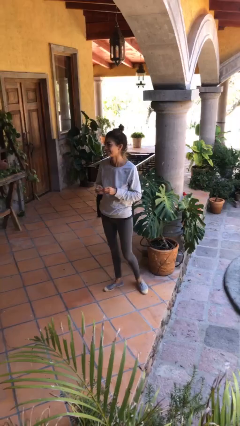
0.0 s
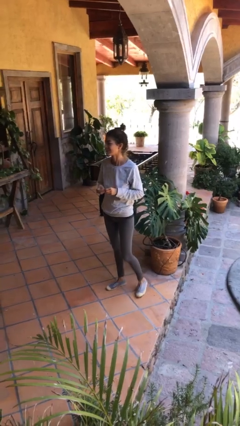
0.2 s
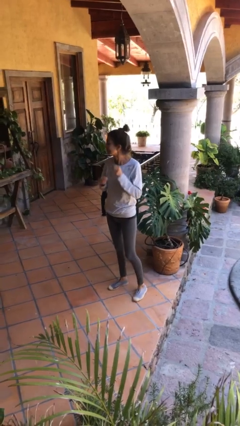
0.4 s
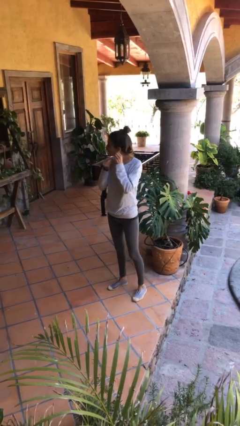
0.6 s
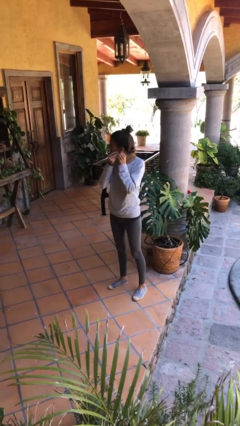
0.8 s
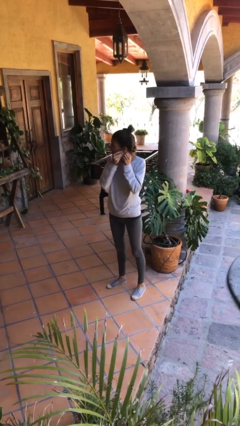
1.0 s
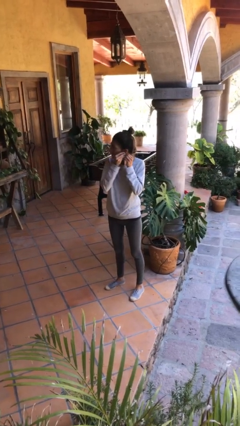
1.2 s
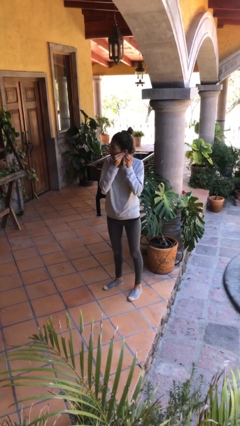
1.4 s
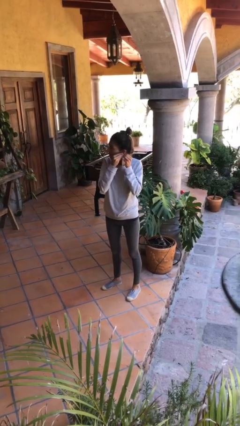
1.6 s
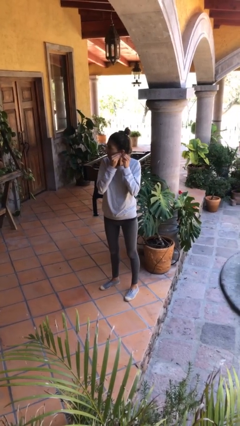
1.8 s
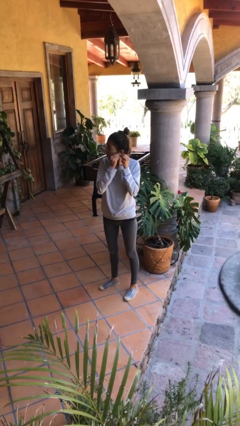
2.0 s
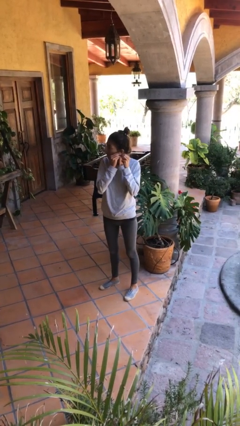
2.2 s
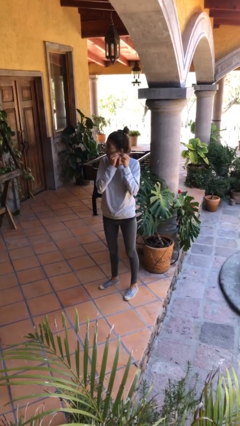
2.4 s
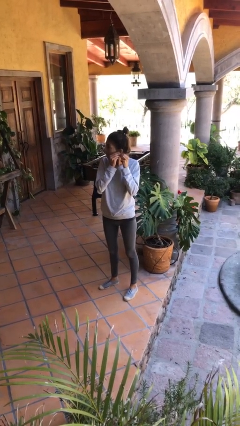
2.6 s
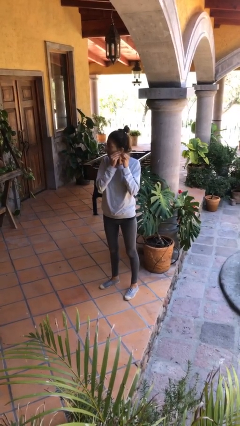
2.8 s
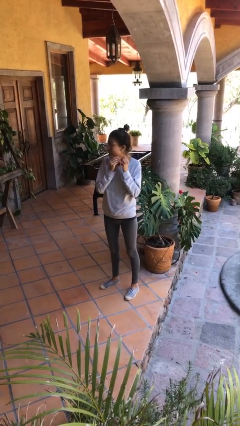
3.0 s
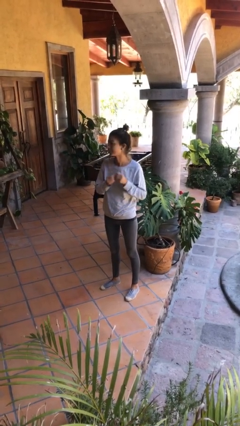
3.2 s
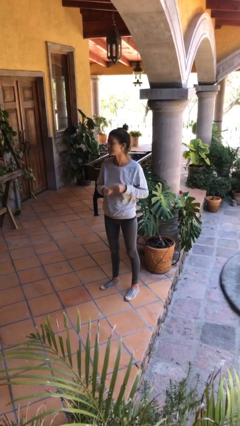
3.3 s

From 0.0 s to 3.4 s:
person puts on earrings

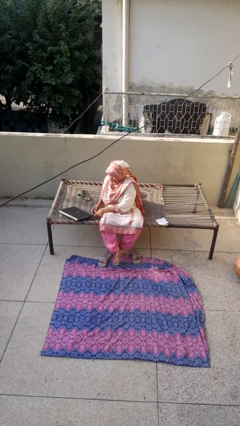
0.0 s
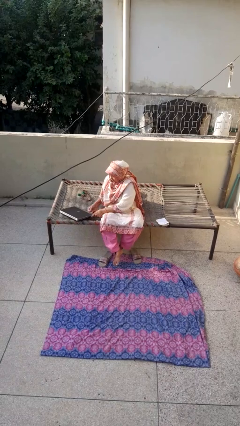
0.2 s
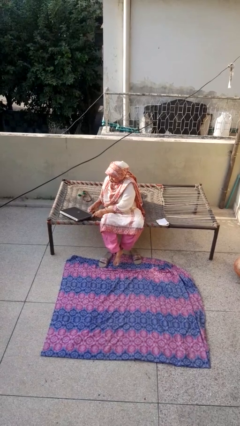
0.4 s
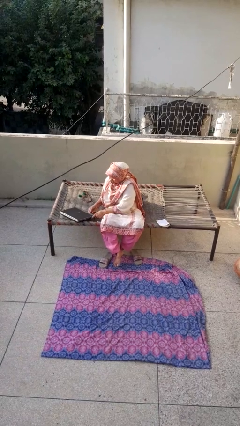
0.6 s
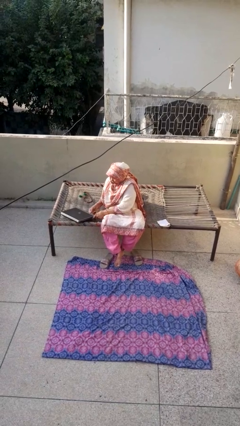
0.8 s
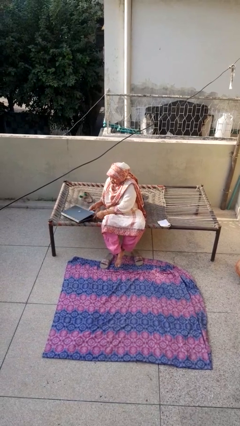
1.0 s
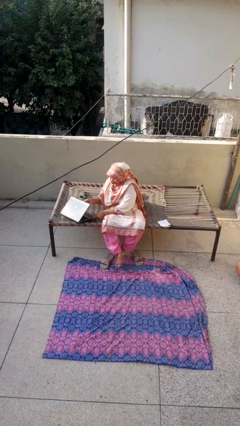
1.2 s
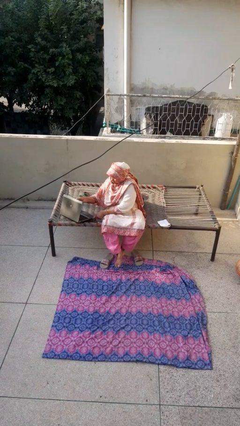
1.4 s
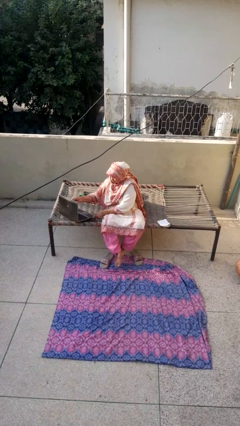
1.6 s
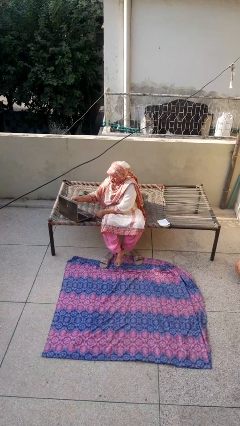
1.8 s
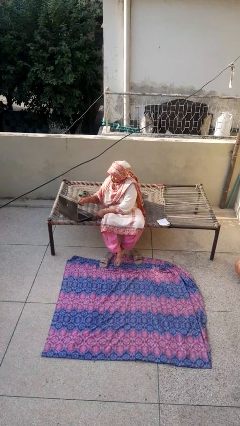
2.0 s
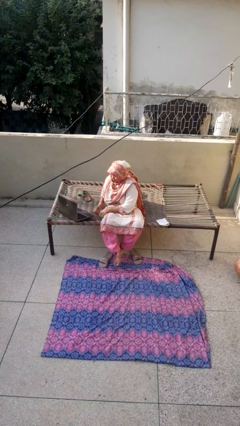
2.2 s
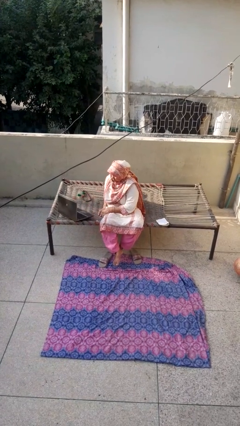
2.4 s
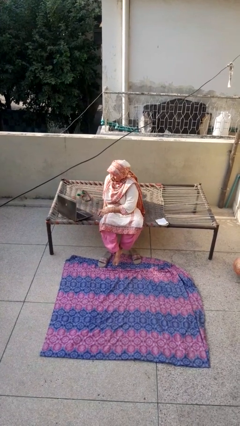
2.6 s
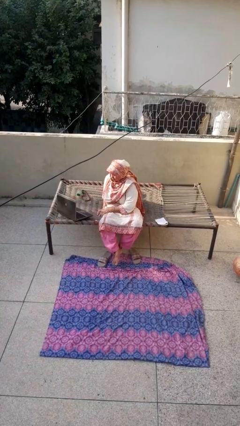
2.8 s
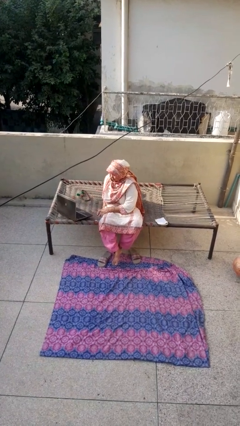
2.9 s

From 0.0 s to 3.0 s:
person opens laptop

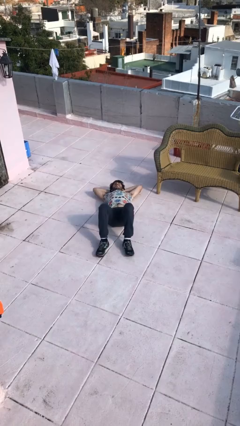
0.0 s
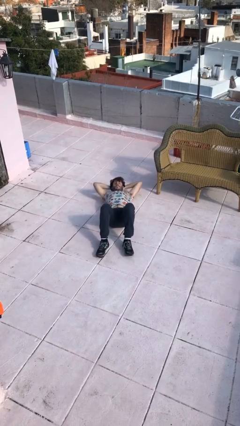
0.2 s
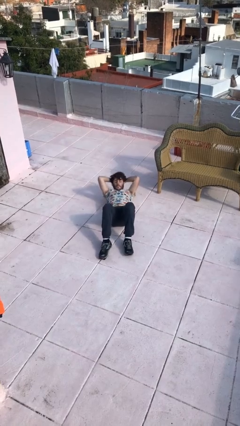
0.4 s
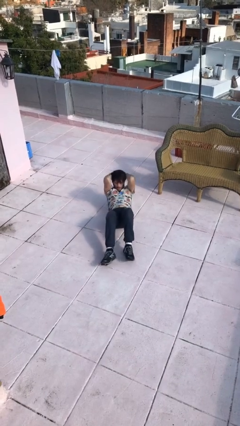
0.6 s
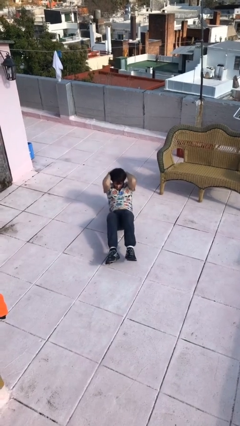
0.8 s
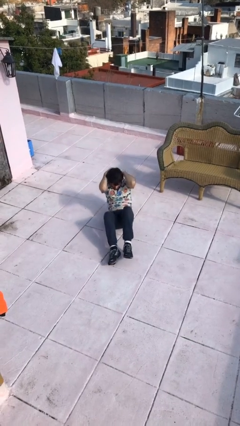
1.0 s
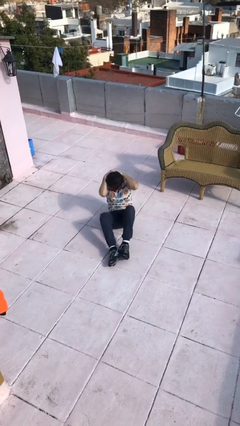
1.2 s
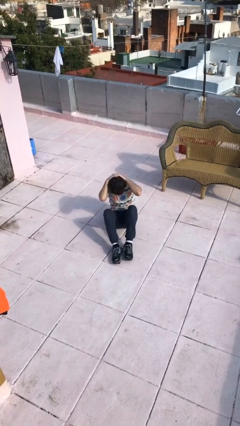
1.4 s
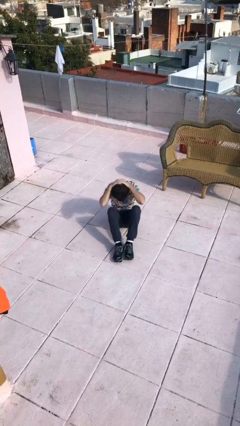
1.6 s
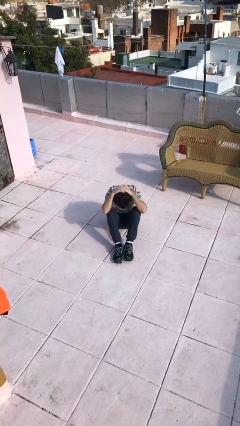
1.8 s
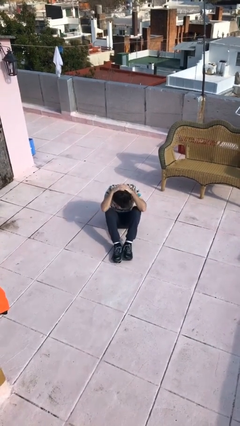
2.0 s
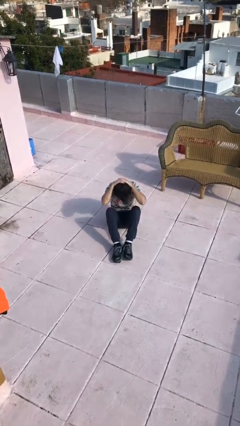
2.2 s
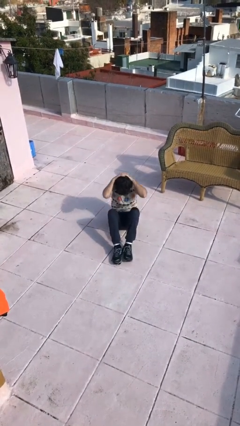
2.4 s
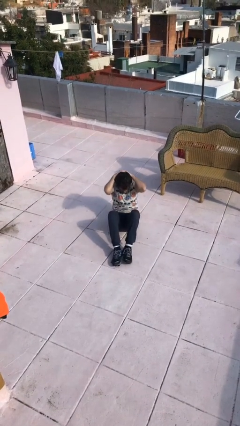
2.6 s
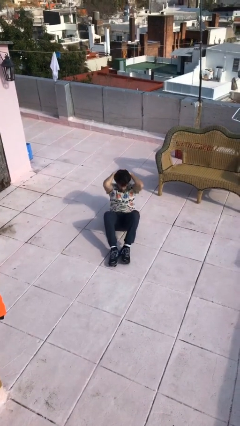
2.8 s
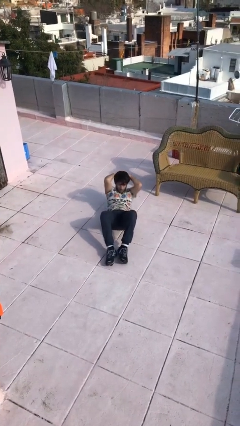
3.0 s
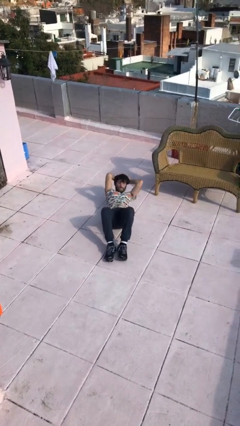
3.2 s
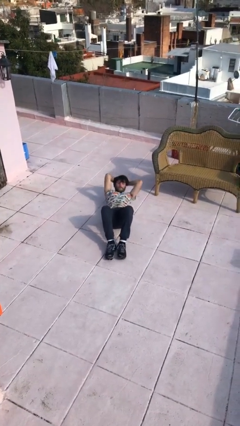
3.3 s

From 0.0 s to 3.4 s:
person exercises with situp

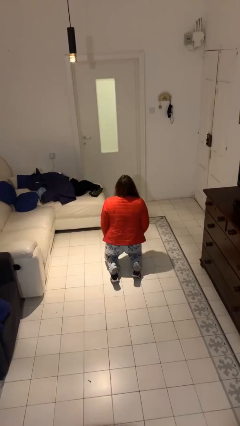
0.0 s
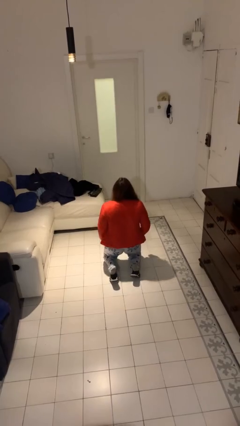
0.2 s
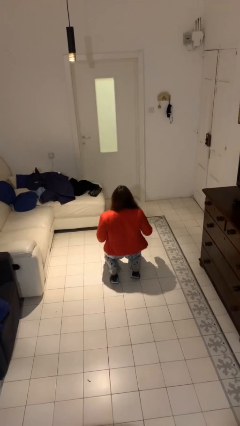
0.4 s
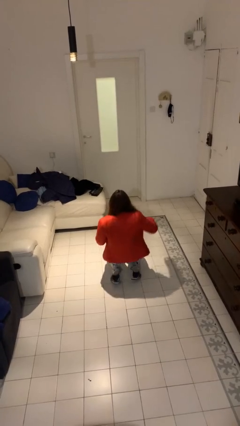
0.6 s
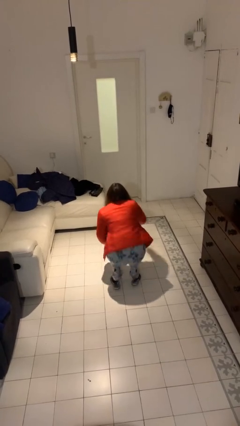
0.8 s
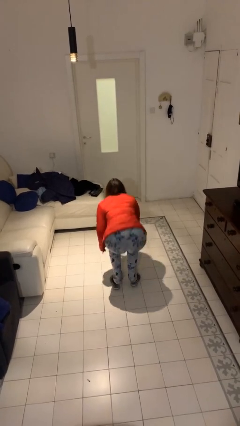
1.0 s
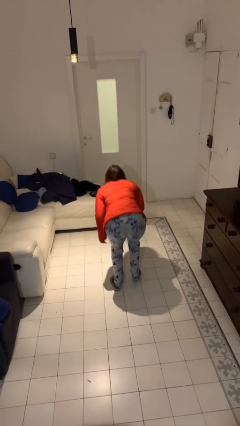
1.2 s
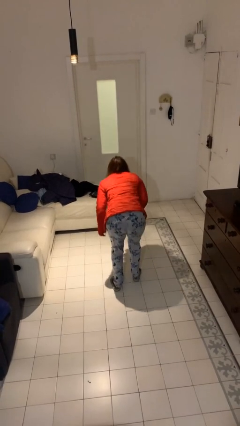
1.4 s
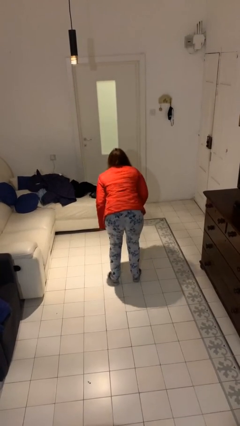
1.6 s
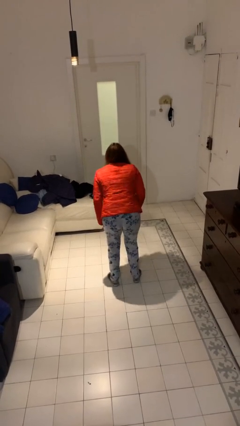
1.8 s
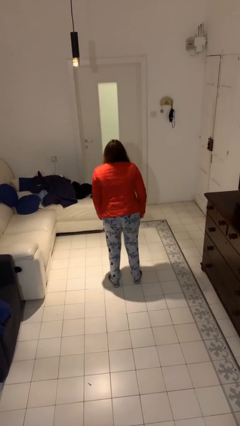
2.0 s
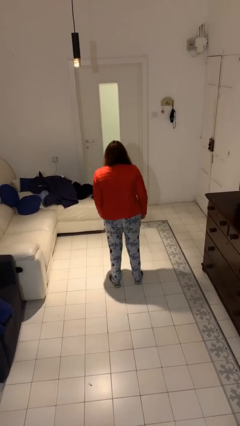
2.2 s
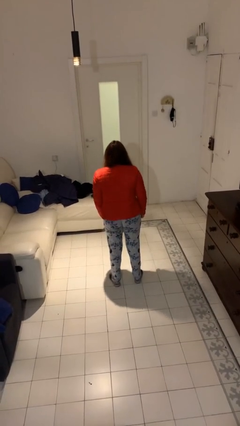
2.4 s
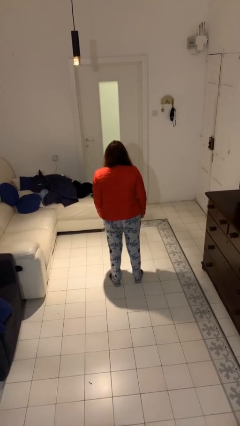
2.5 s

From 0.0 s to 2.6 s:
person stands up from floor

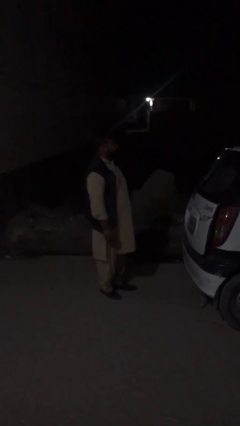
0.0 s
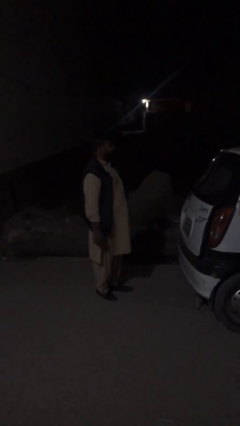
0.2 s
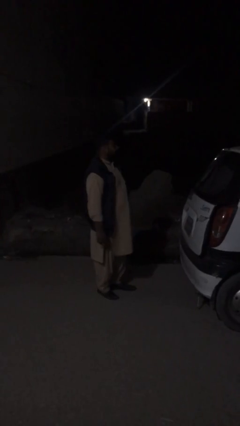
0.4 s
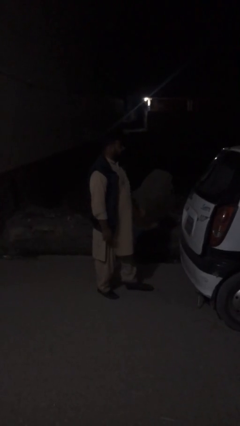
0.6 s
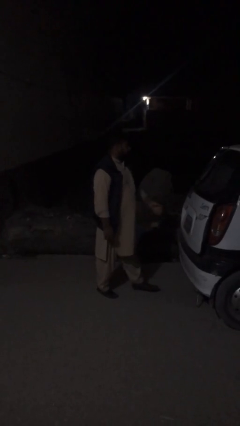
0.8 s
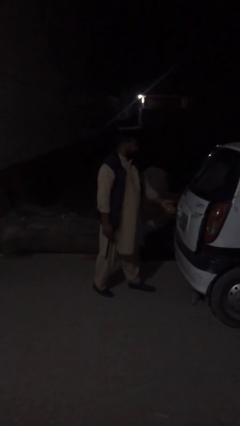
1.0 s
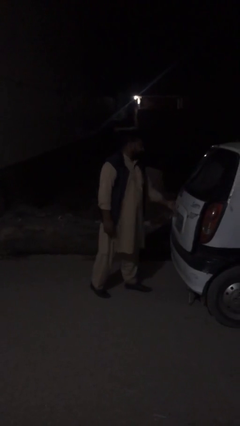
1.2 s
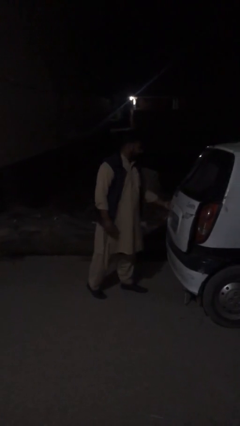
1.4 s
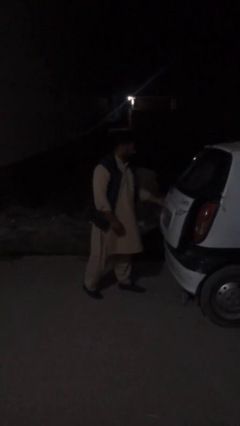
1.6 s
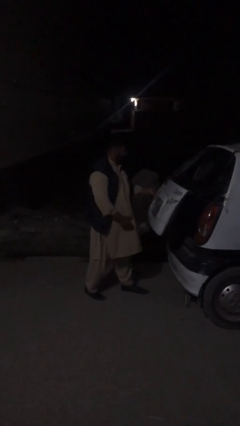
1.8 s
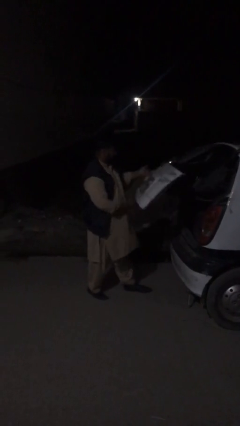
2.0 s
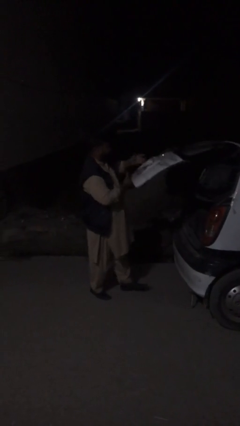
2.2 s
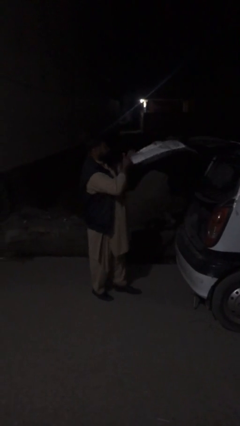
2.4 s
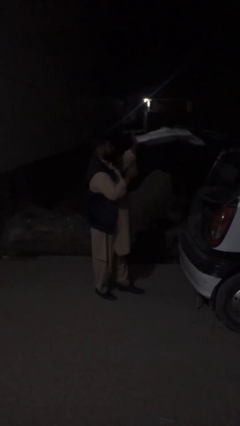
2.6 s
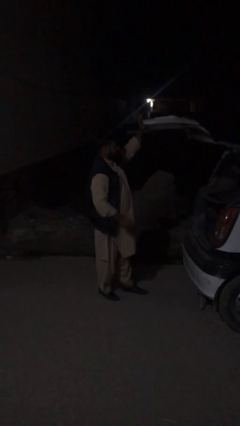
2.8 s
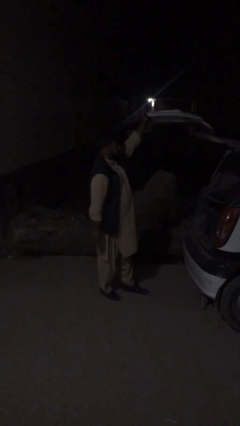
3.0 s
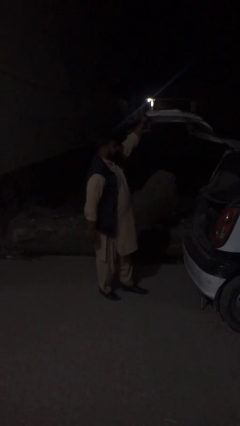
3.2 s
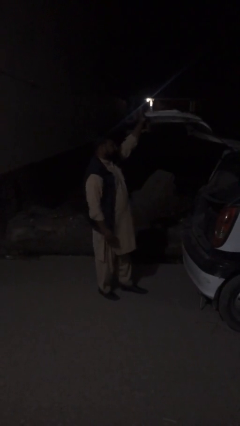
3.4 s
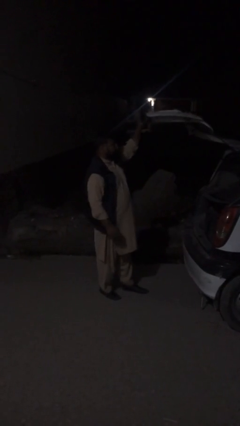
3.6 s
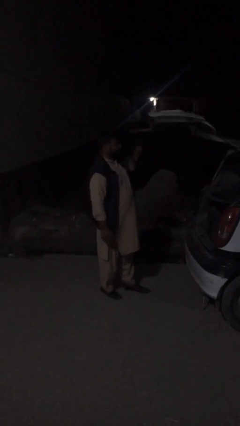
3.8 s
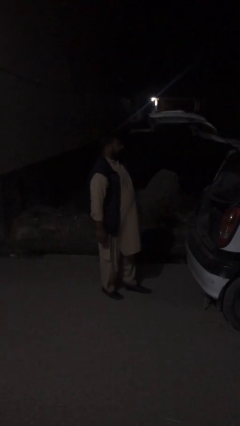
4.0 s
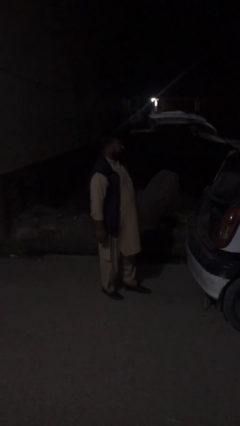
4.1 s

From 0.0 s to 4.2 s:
person opens car trunk

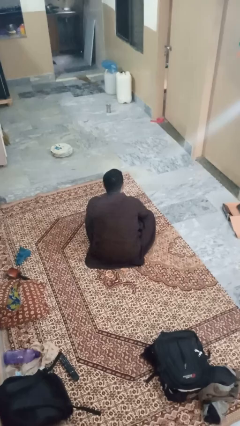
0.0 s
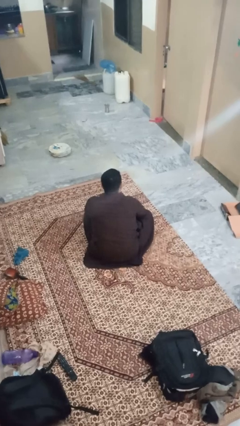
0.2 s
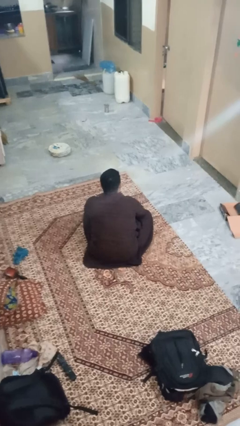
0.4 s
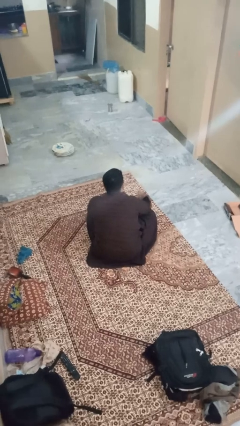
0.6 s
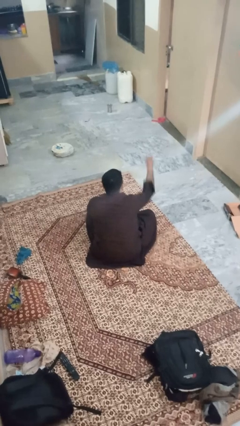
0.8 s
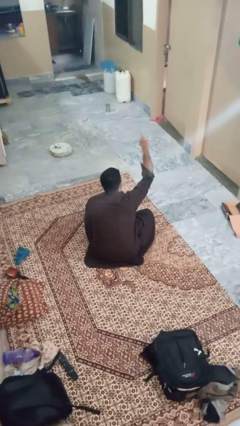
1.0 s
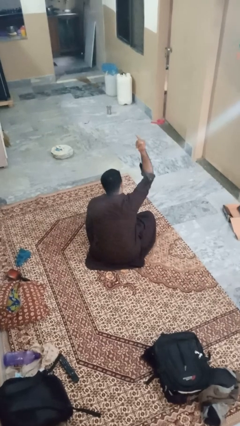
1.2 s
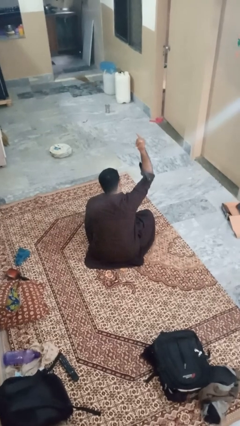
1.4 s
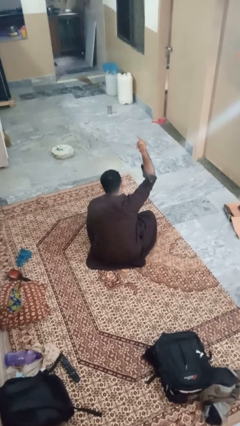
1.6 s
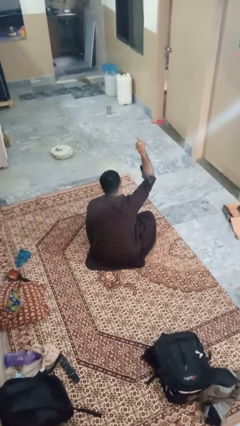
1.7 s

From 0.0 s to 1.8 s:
person gestures hang loose
